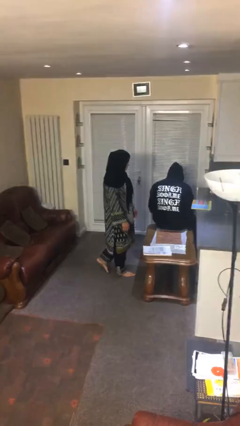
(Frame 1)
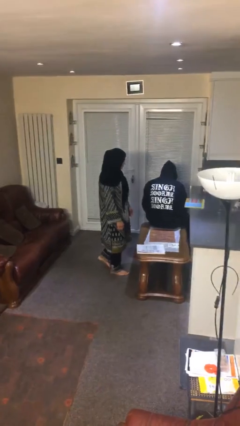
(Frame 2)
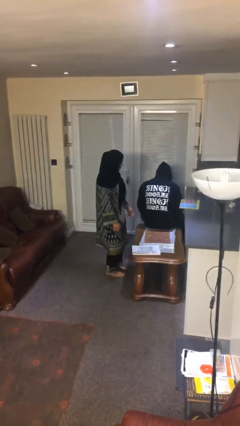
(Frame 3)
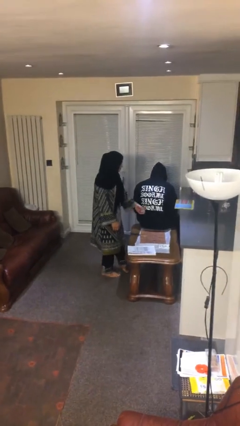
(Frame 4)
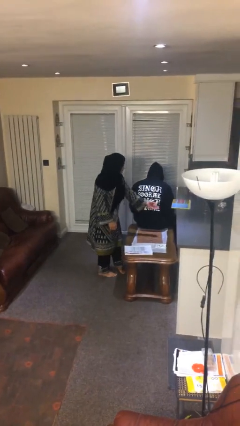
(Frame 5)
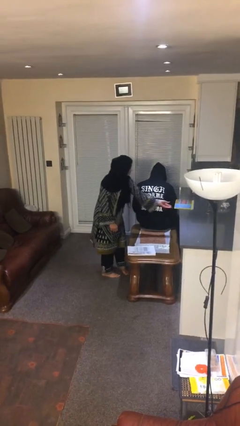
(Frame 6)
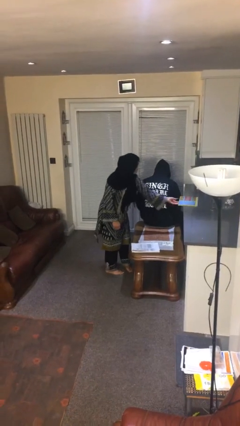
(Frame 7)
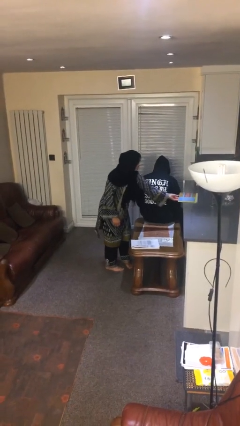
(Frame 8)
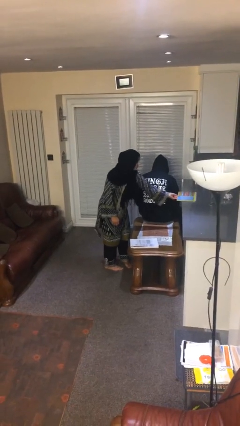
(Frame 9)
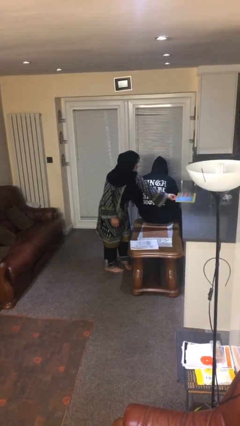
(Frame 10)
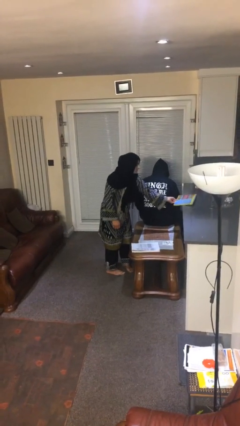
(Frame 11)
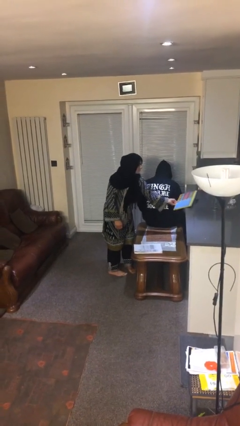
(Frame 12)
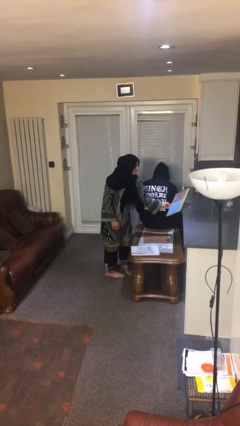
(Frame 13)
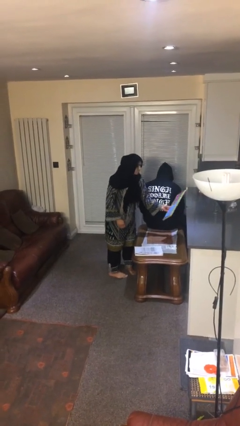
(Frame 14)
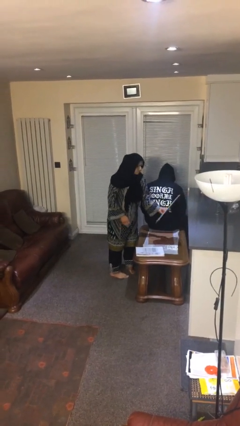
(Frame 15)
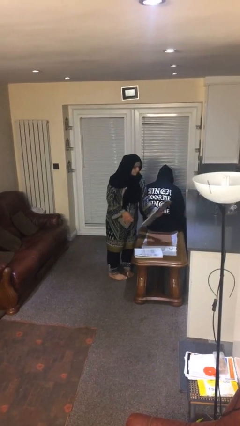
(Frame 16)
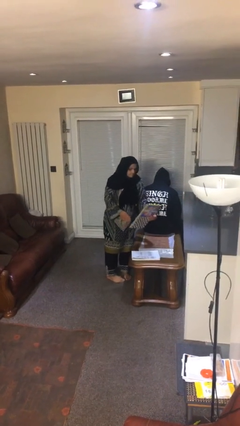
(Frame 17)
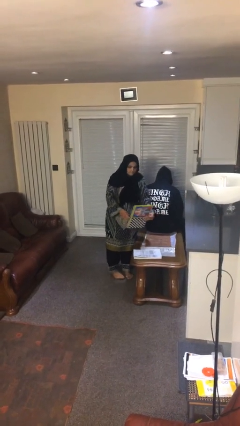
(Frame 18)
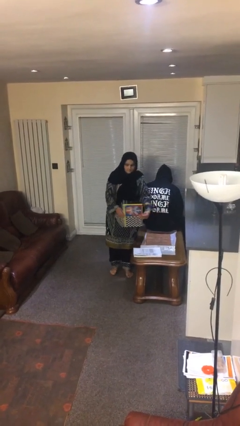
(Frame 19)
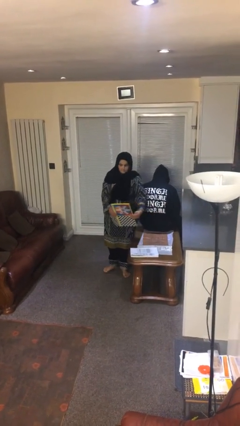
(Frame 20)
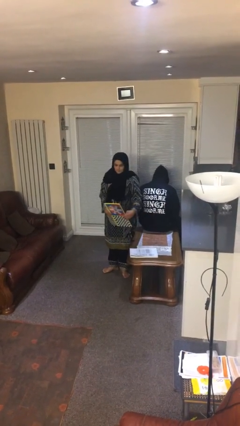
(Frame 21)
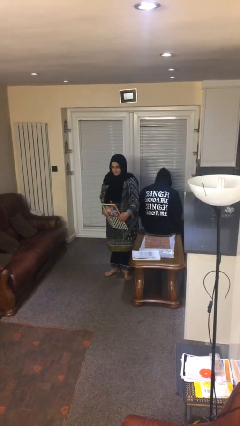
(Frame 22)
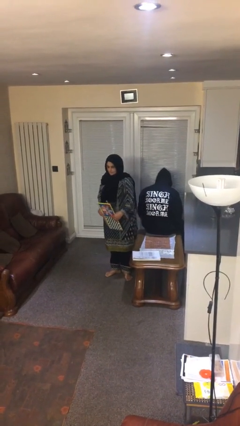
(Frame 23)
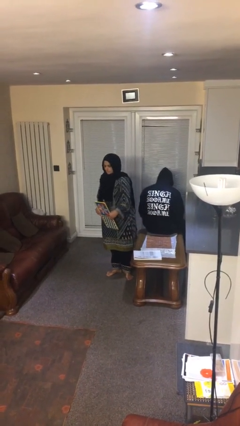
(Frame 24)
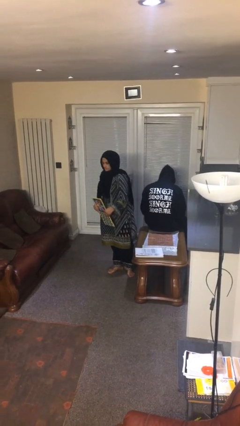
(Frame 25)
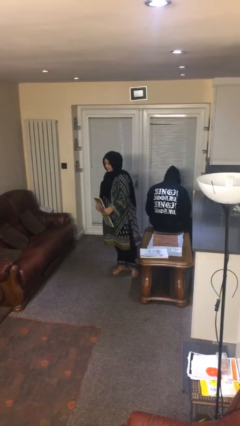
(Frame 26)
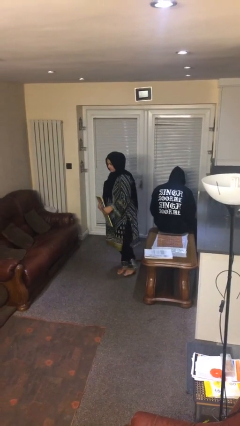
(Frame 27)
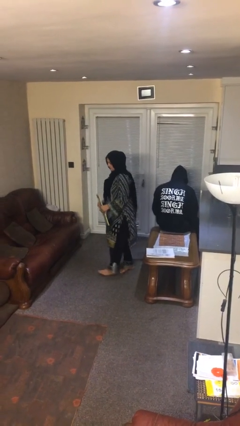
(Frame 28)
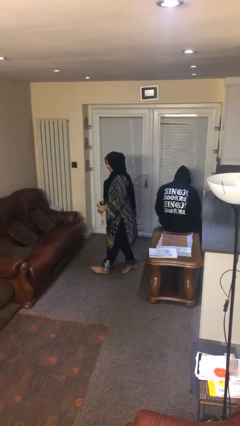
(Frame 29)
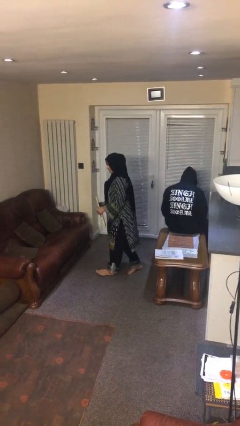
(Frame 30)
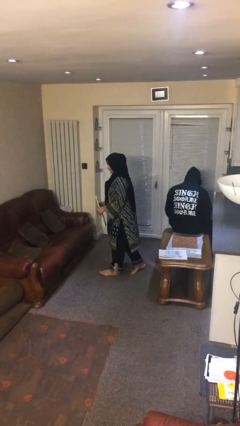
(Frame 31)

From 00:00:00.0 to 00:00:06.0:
person steals object from person

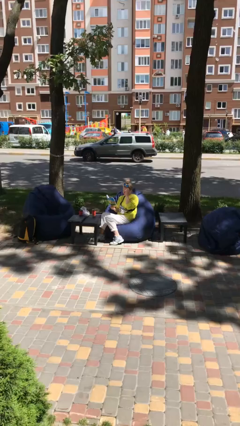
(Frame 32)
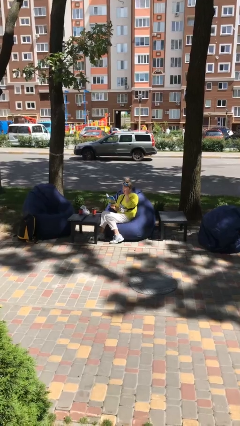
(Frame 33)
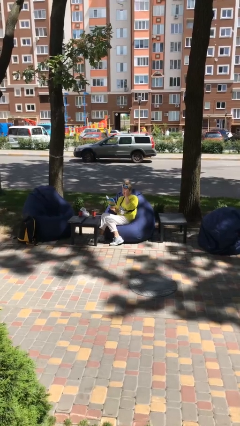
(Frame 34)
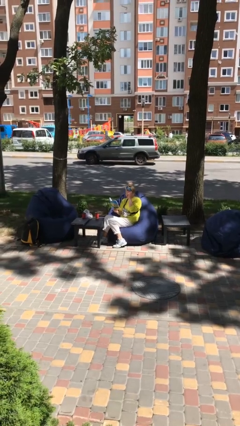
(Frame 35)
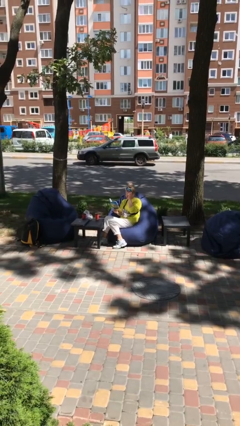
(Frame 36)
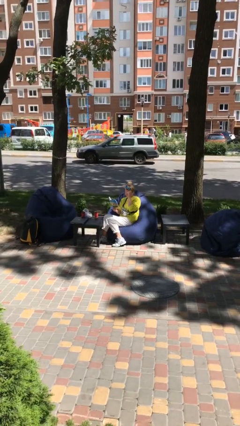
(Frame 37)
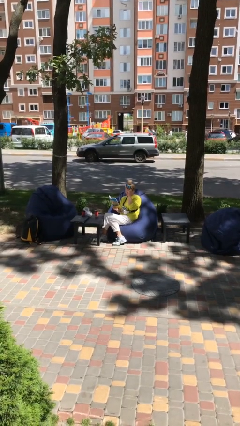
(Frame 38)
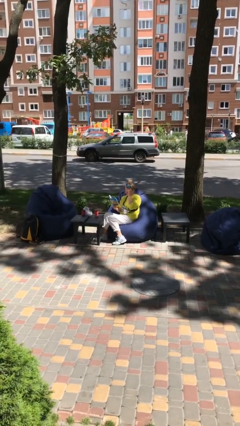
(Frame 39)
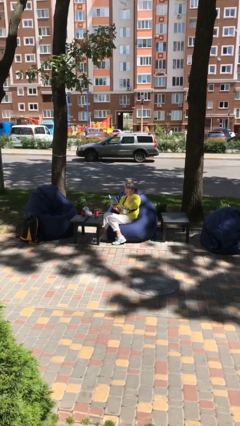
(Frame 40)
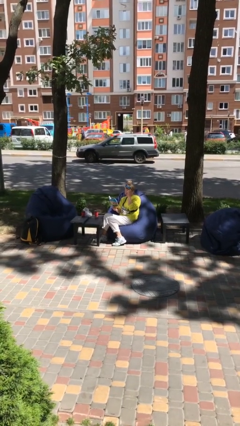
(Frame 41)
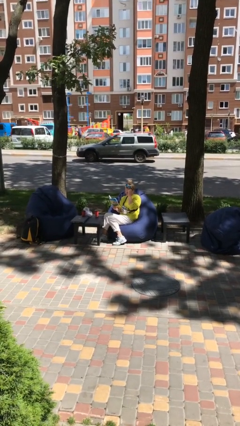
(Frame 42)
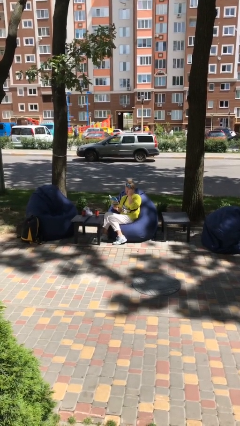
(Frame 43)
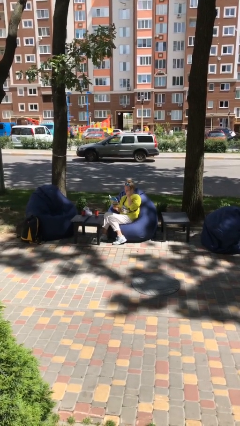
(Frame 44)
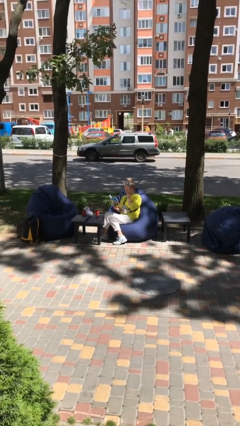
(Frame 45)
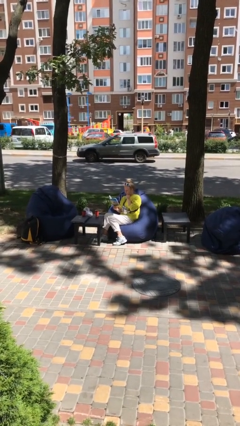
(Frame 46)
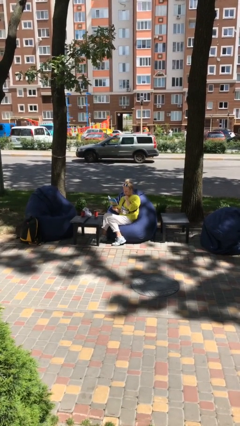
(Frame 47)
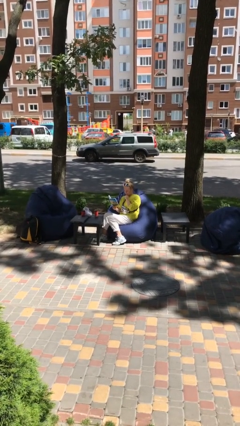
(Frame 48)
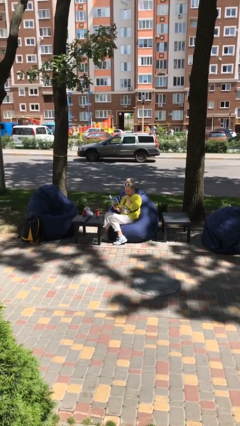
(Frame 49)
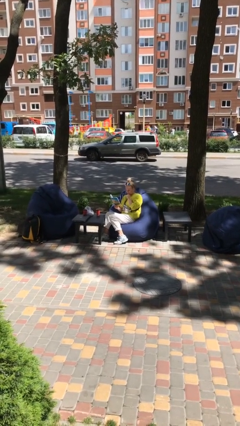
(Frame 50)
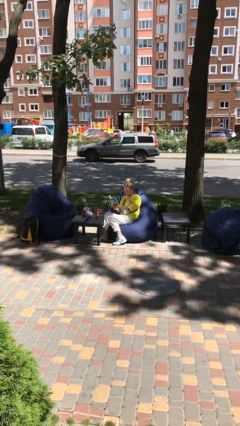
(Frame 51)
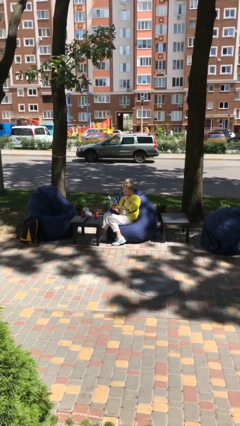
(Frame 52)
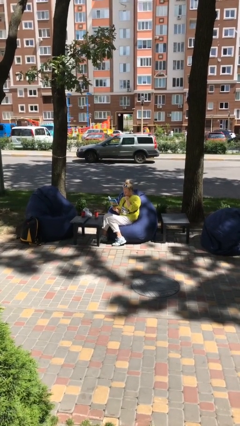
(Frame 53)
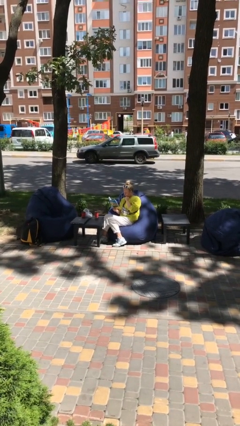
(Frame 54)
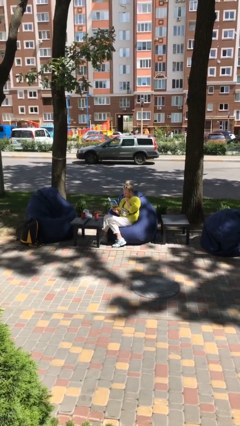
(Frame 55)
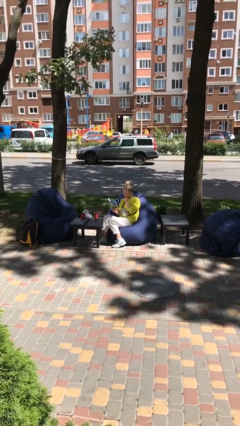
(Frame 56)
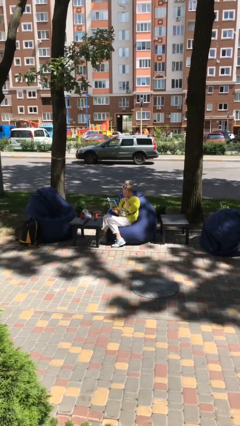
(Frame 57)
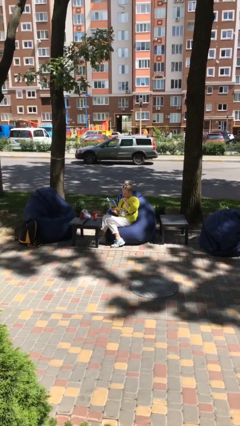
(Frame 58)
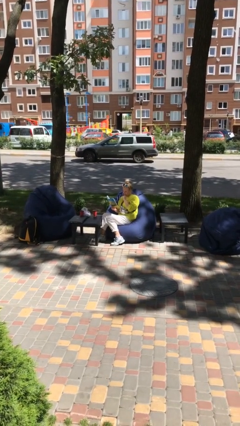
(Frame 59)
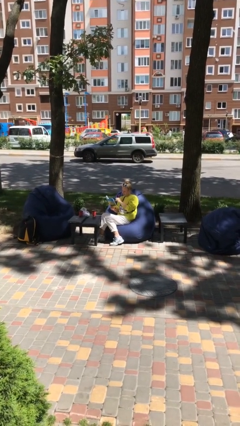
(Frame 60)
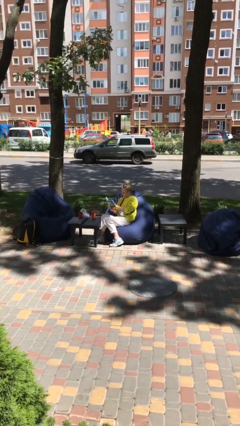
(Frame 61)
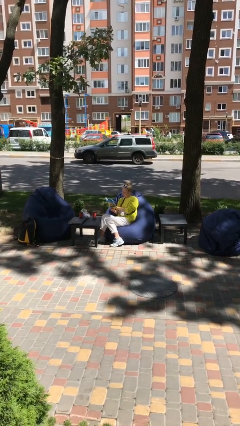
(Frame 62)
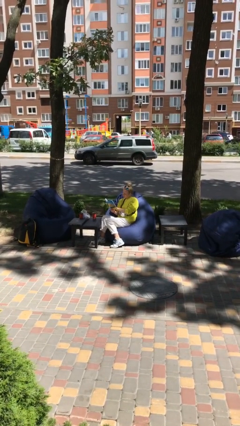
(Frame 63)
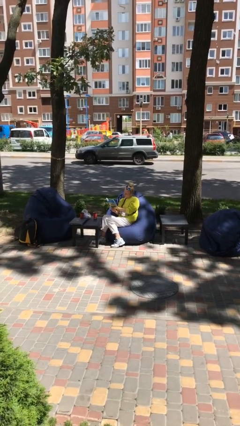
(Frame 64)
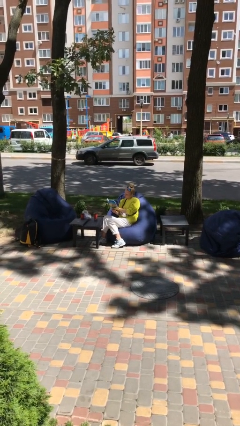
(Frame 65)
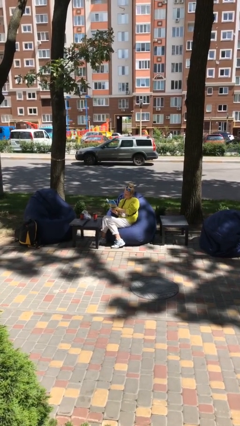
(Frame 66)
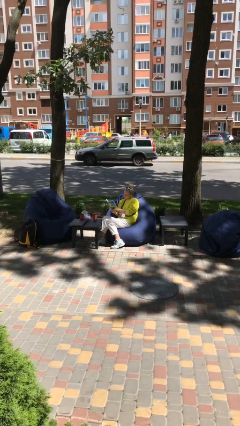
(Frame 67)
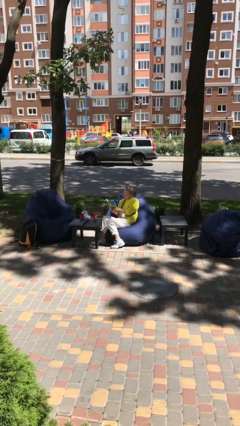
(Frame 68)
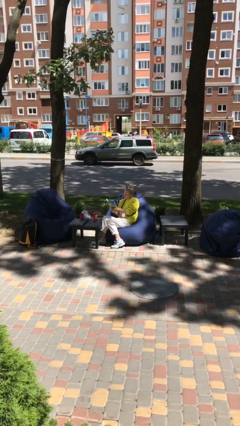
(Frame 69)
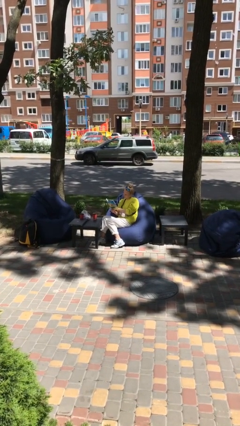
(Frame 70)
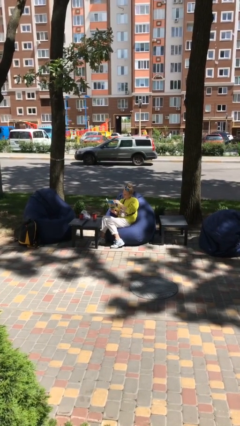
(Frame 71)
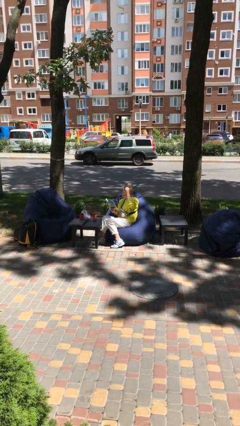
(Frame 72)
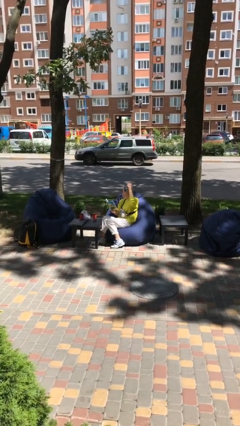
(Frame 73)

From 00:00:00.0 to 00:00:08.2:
person reads document

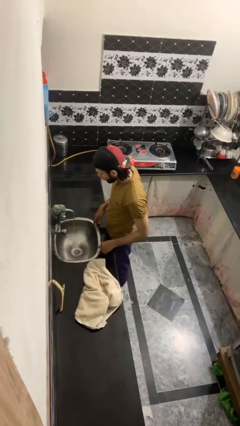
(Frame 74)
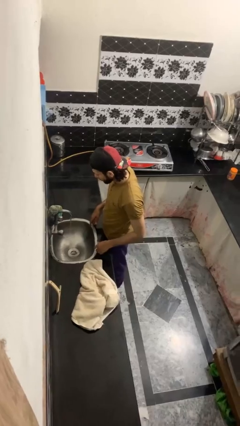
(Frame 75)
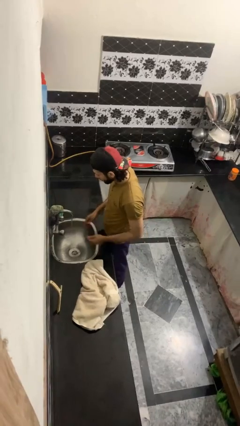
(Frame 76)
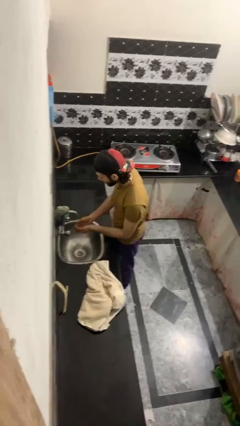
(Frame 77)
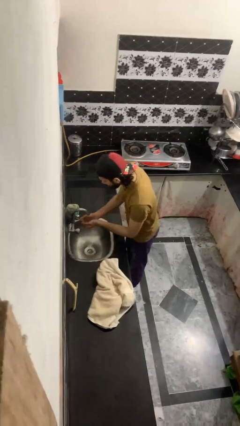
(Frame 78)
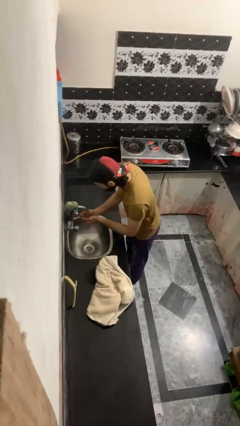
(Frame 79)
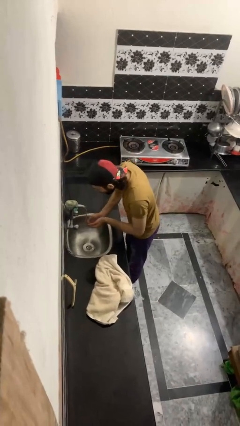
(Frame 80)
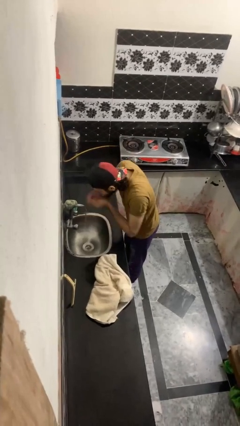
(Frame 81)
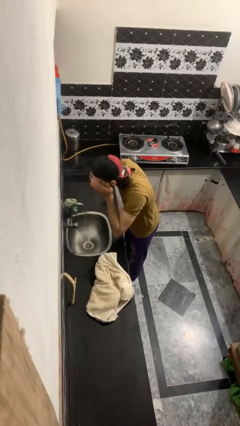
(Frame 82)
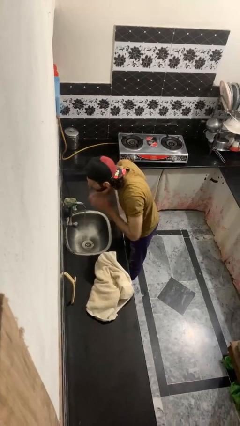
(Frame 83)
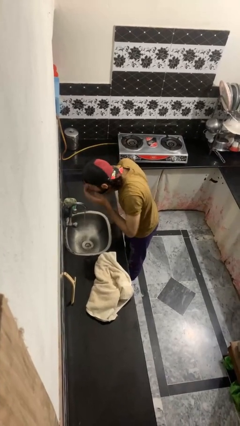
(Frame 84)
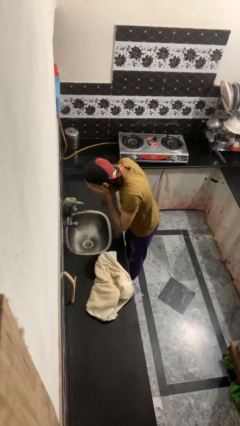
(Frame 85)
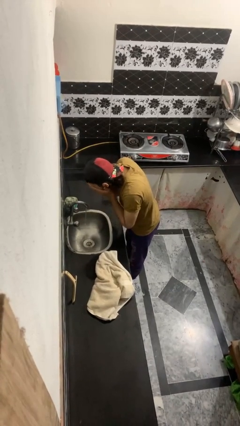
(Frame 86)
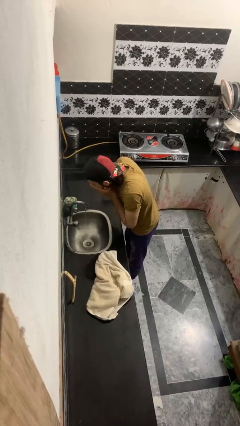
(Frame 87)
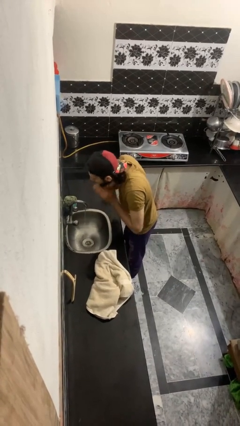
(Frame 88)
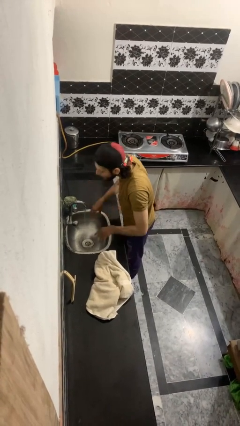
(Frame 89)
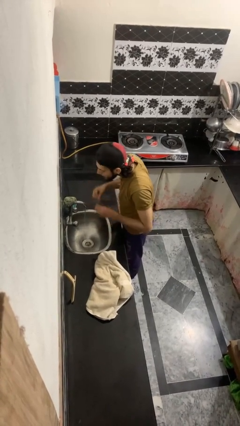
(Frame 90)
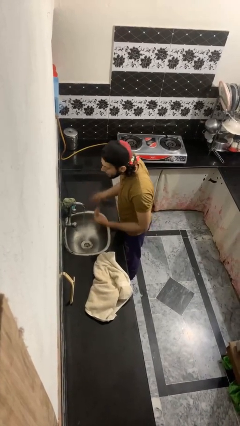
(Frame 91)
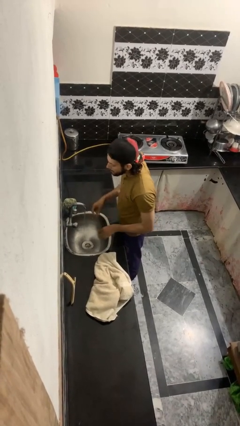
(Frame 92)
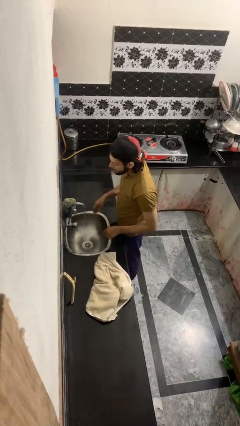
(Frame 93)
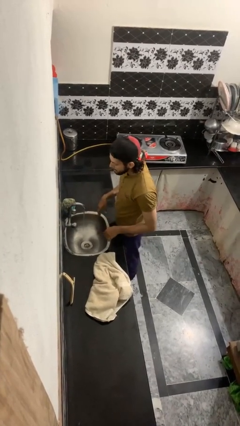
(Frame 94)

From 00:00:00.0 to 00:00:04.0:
person washes face
